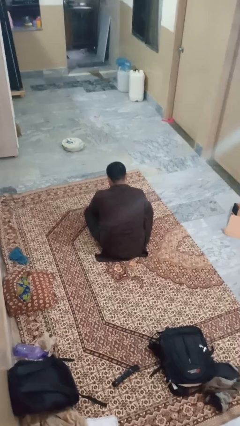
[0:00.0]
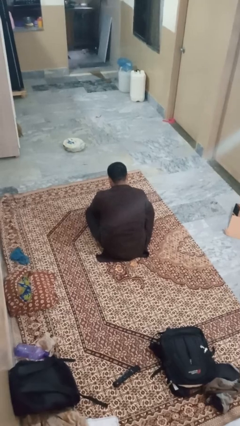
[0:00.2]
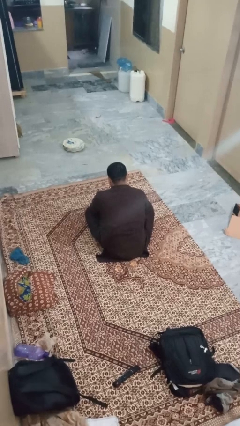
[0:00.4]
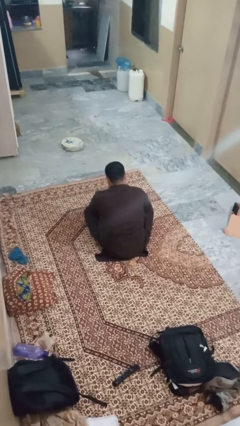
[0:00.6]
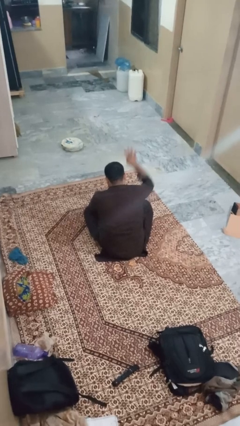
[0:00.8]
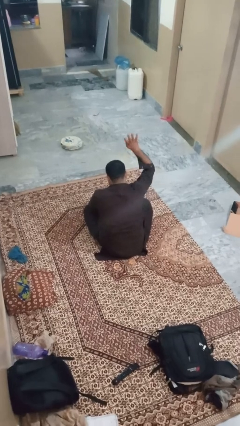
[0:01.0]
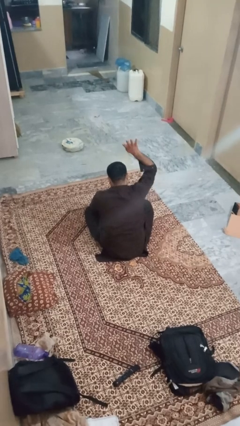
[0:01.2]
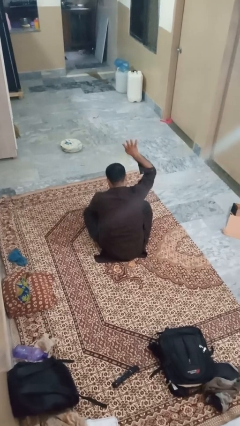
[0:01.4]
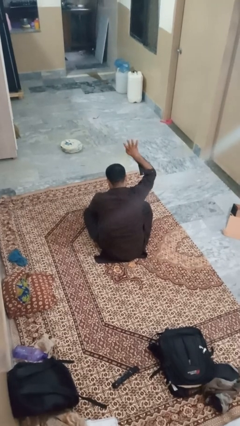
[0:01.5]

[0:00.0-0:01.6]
person gestures number four

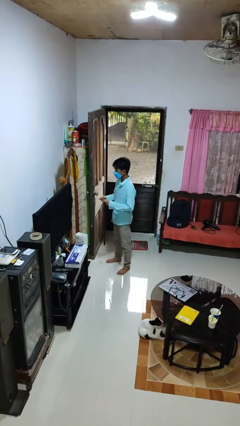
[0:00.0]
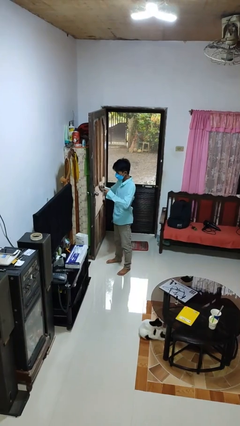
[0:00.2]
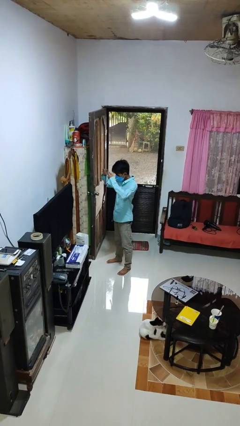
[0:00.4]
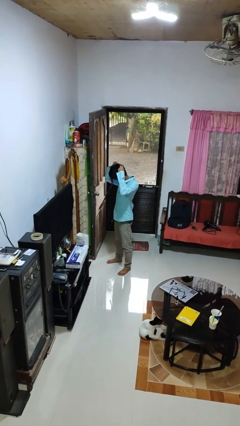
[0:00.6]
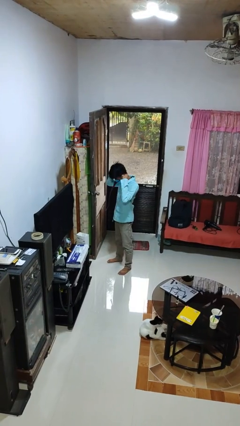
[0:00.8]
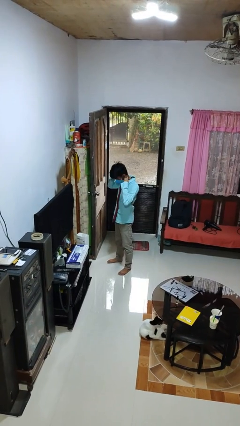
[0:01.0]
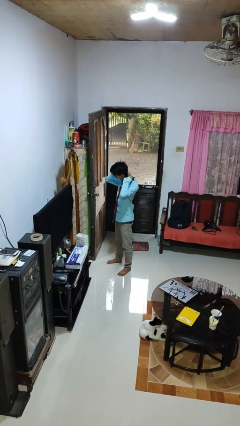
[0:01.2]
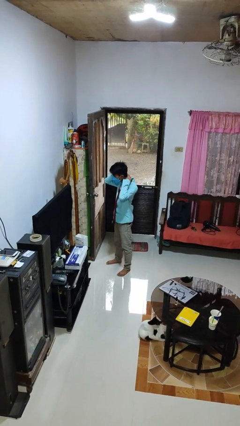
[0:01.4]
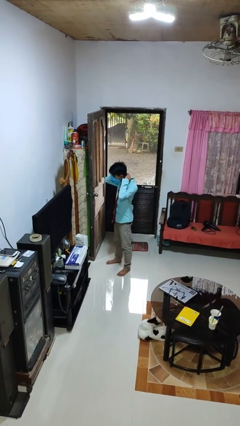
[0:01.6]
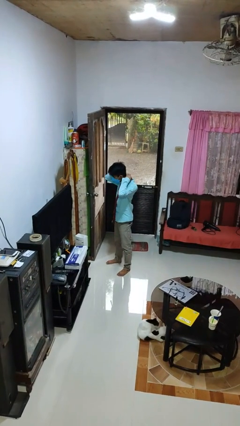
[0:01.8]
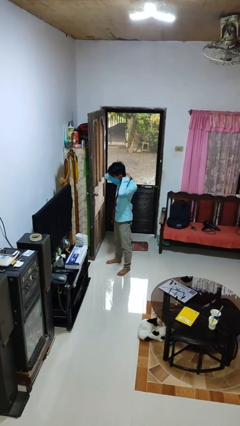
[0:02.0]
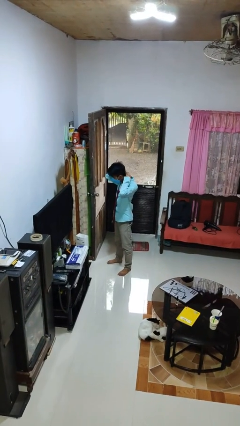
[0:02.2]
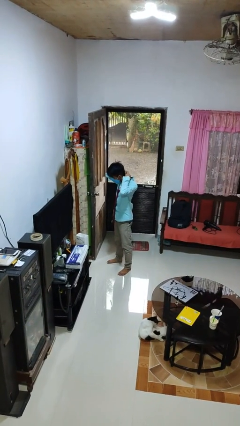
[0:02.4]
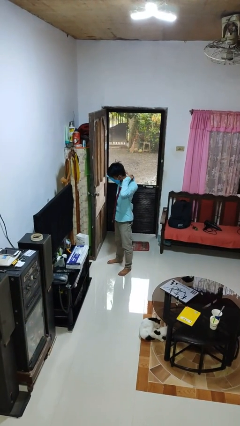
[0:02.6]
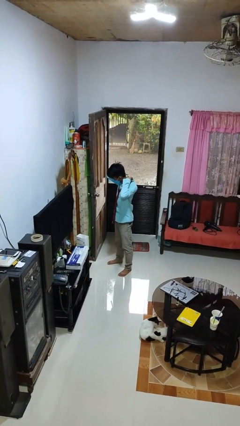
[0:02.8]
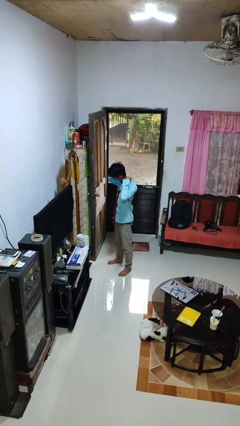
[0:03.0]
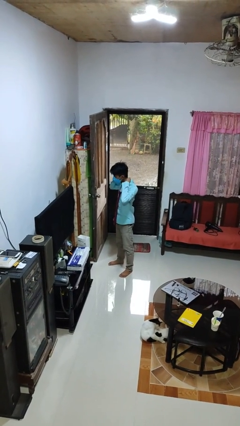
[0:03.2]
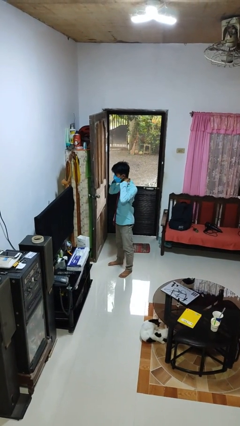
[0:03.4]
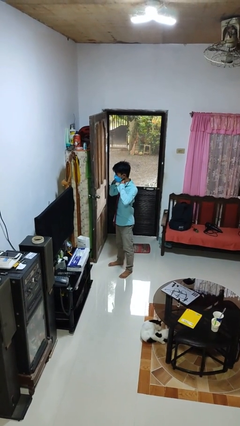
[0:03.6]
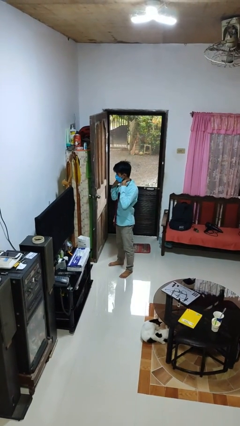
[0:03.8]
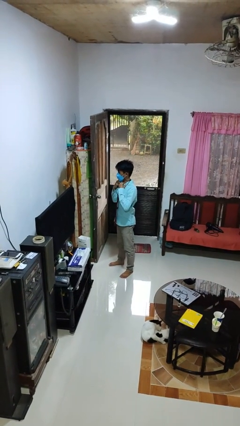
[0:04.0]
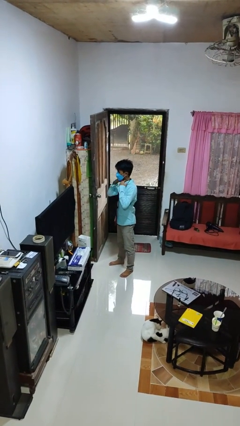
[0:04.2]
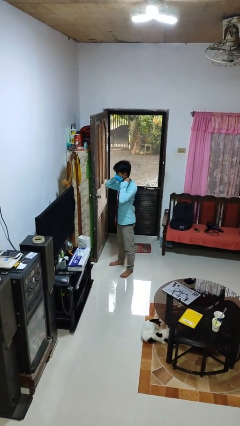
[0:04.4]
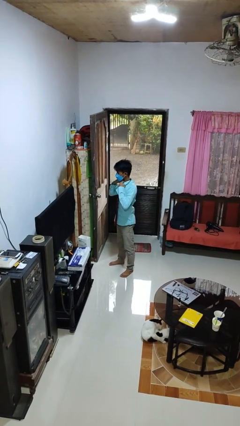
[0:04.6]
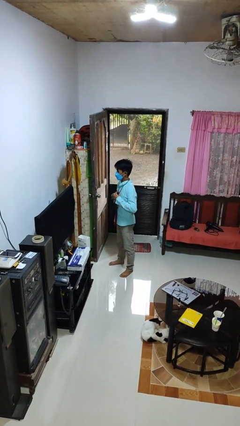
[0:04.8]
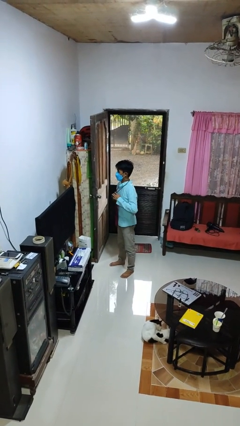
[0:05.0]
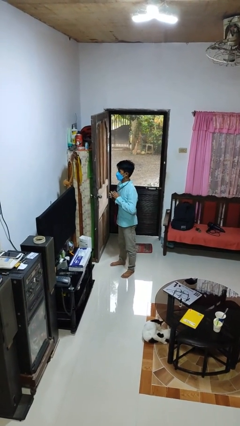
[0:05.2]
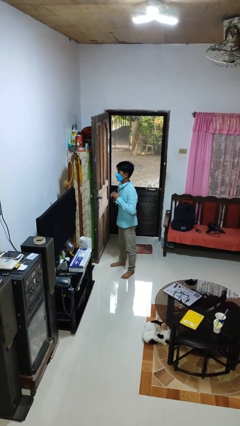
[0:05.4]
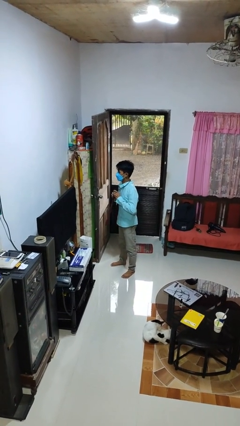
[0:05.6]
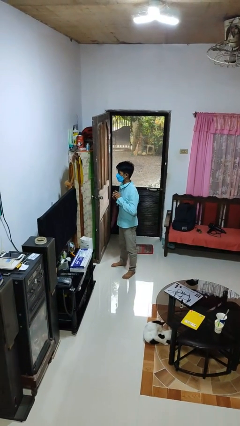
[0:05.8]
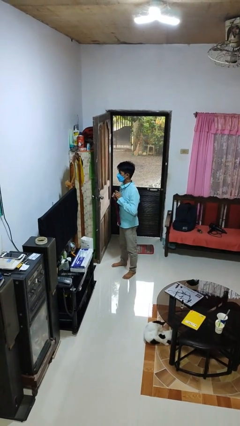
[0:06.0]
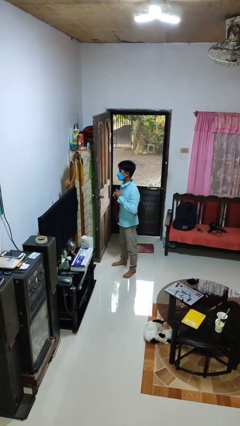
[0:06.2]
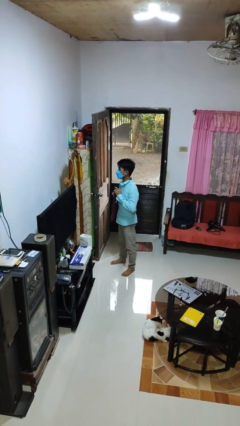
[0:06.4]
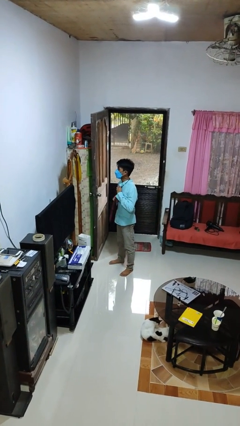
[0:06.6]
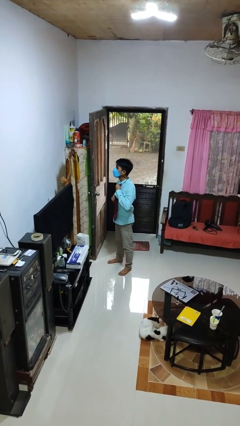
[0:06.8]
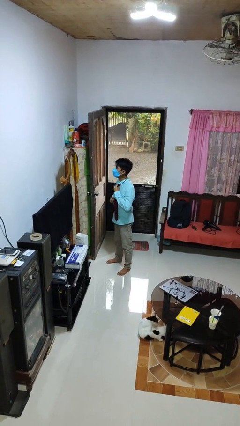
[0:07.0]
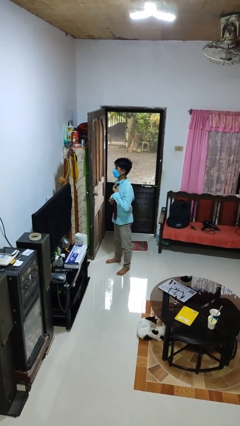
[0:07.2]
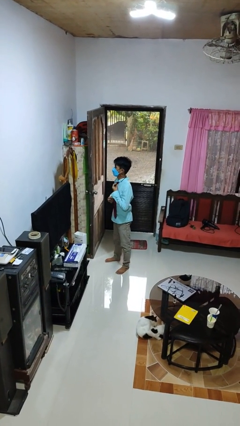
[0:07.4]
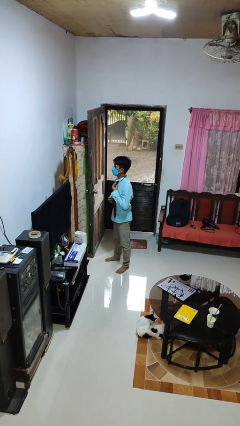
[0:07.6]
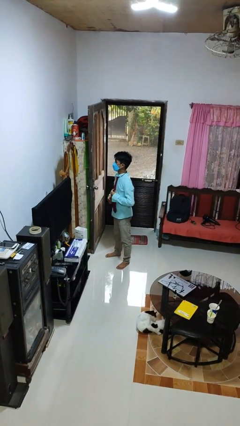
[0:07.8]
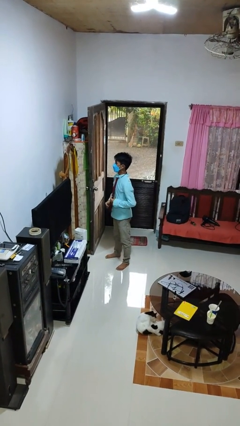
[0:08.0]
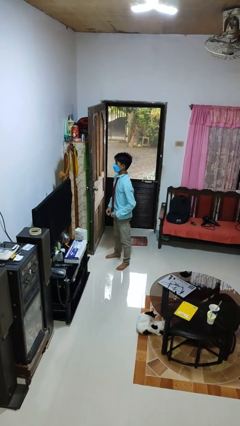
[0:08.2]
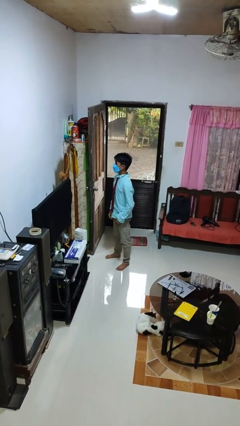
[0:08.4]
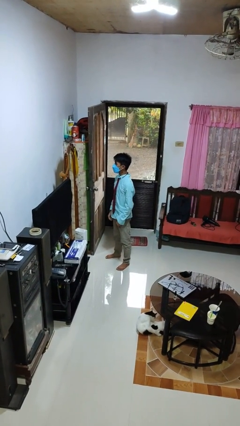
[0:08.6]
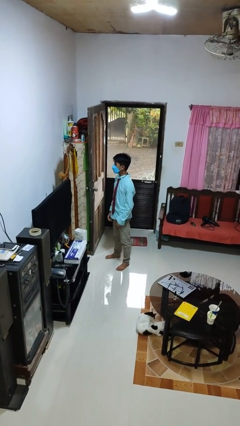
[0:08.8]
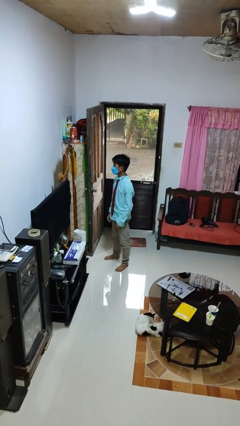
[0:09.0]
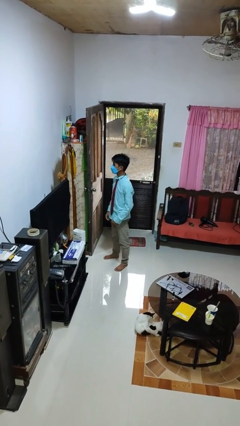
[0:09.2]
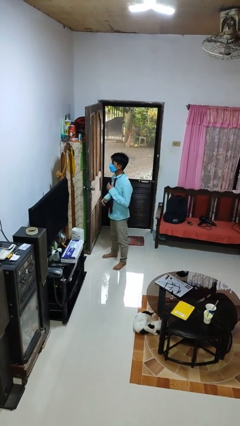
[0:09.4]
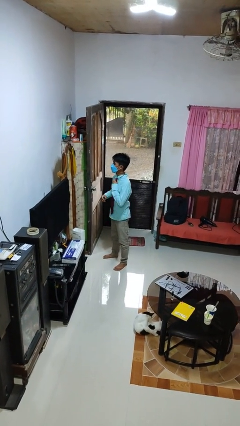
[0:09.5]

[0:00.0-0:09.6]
person puts on necktie

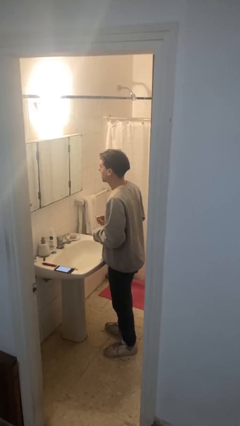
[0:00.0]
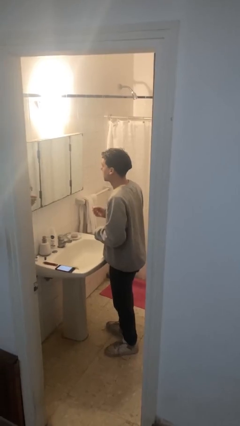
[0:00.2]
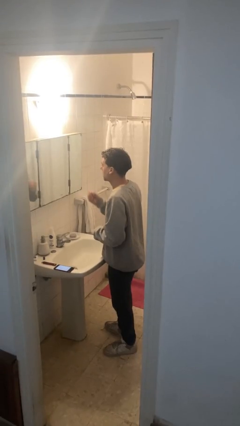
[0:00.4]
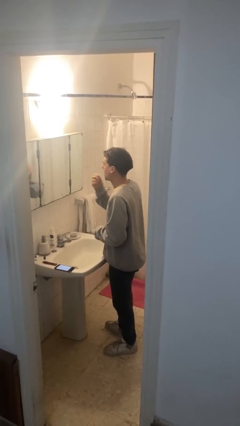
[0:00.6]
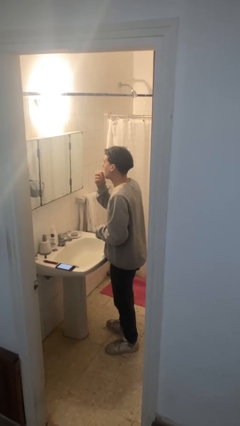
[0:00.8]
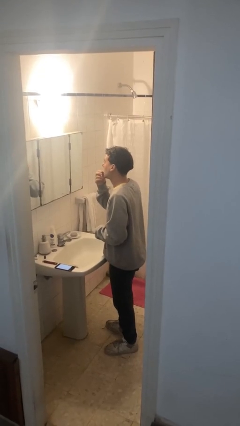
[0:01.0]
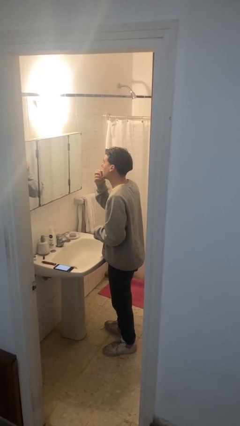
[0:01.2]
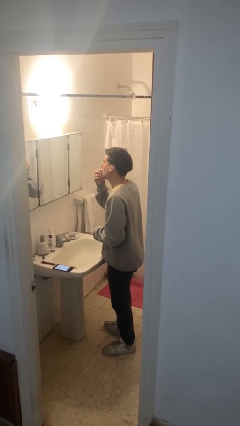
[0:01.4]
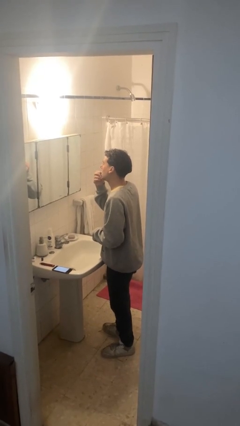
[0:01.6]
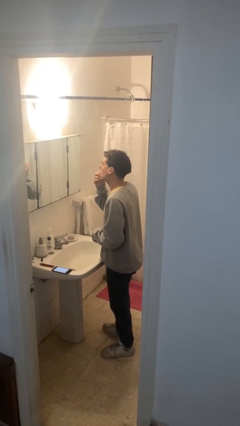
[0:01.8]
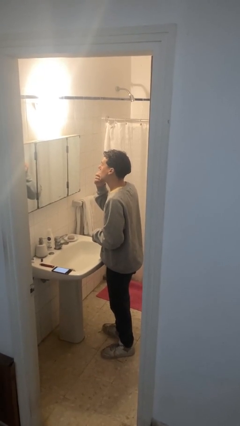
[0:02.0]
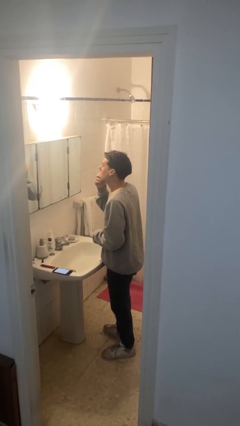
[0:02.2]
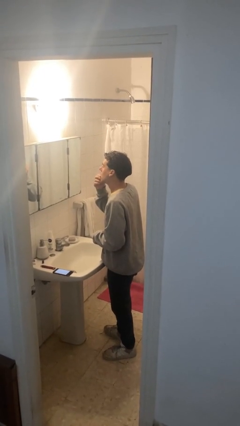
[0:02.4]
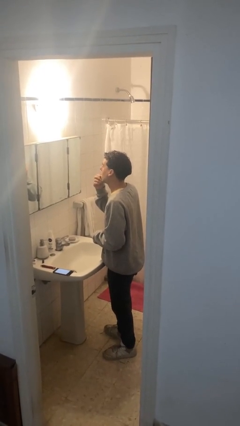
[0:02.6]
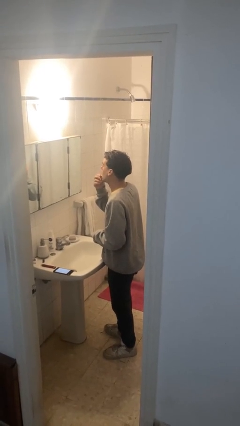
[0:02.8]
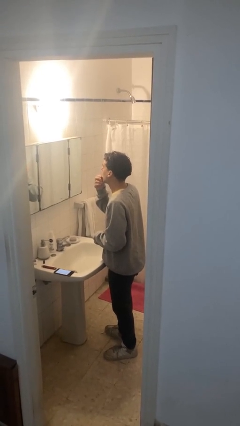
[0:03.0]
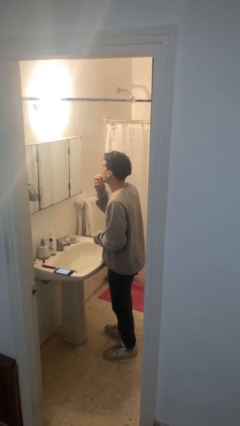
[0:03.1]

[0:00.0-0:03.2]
person applies lip makeup

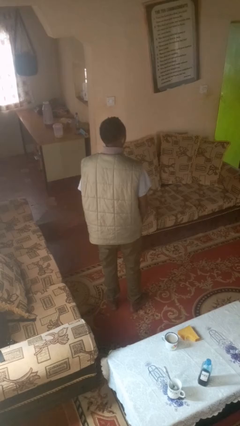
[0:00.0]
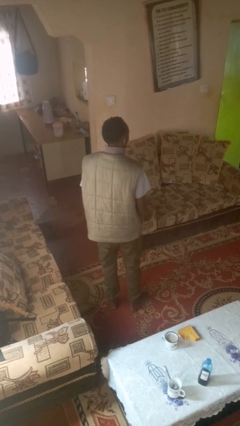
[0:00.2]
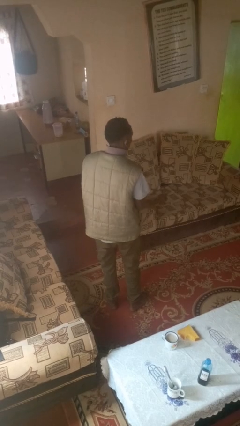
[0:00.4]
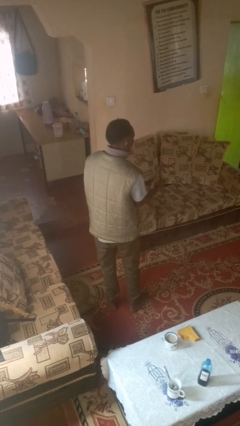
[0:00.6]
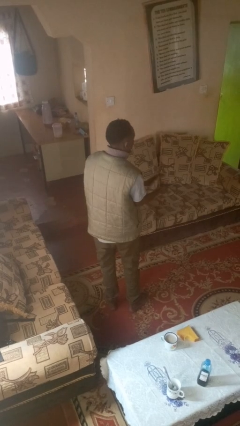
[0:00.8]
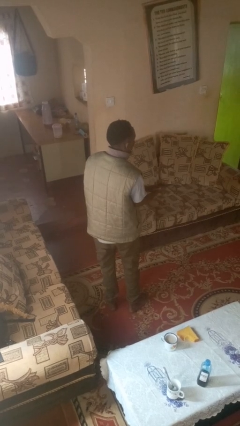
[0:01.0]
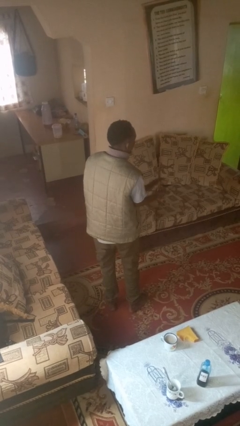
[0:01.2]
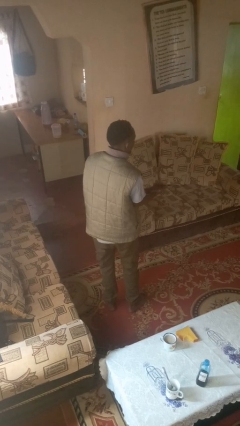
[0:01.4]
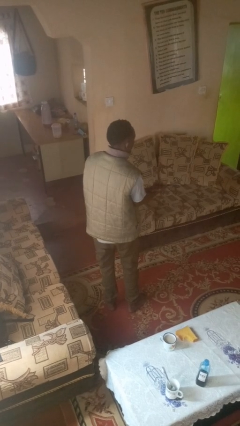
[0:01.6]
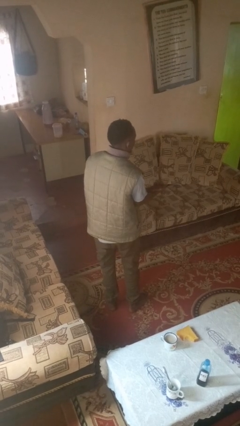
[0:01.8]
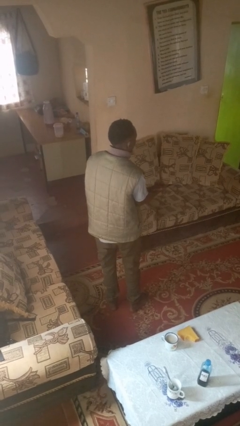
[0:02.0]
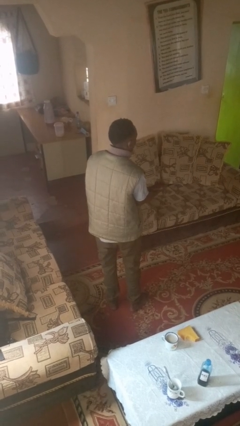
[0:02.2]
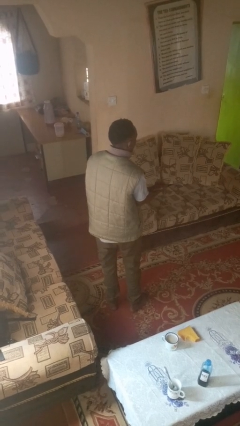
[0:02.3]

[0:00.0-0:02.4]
person claps hands

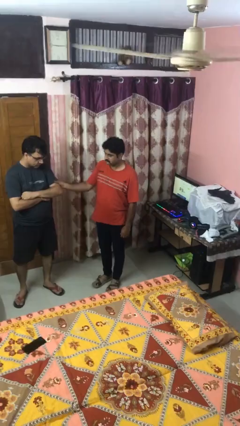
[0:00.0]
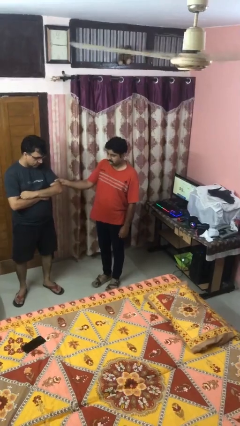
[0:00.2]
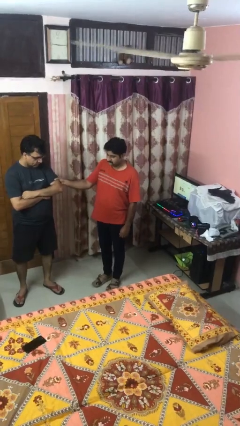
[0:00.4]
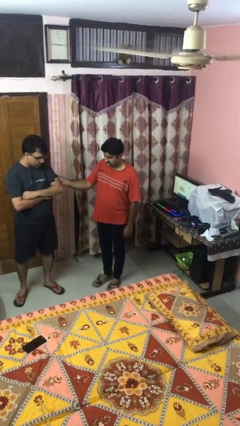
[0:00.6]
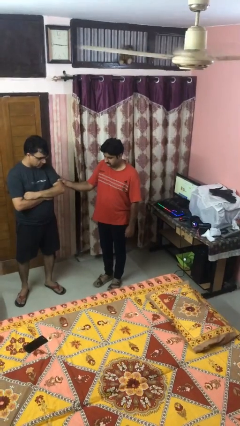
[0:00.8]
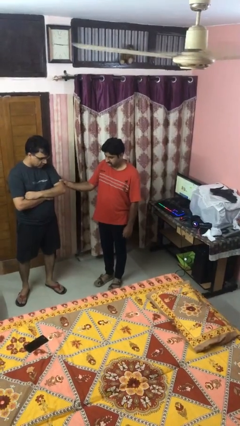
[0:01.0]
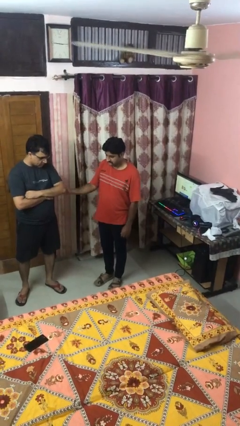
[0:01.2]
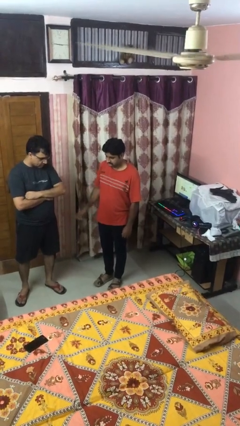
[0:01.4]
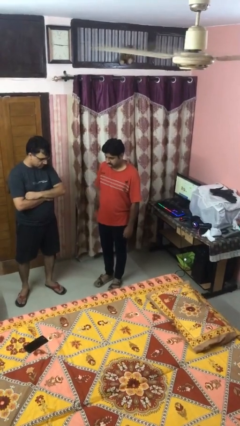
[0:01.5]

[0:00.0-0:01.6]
person grabs person by bicep
